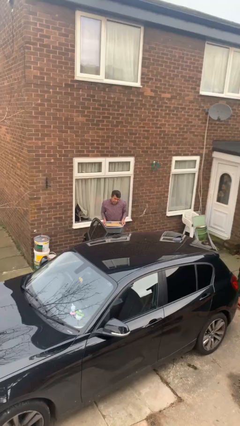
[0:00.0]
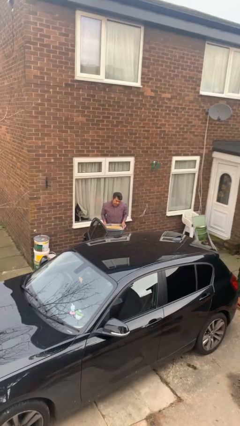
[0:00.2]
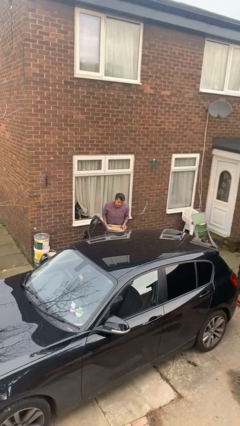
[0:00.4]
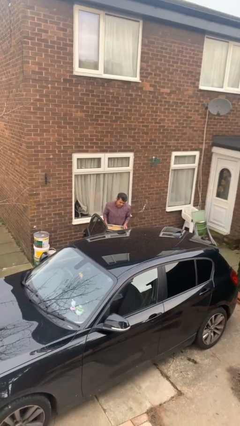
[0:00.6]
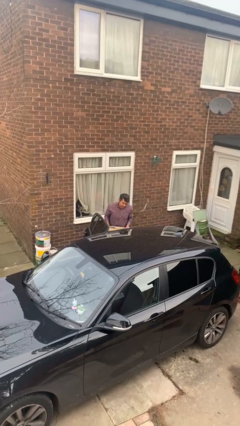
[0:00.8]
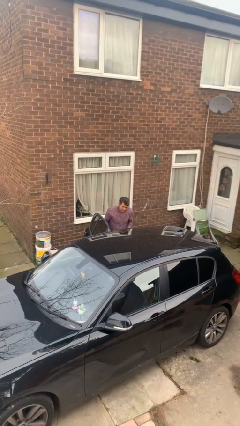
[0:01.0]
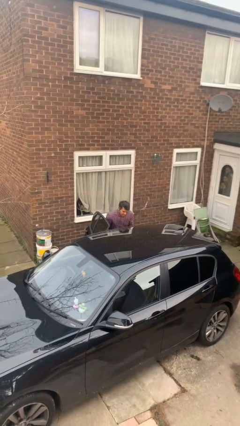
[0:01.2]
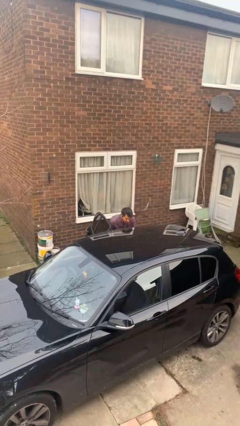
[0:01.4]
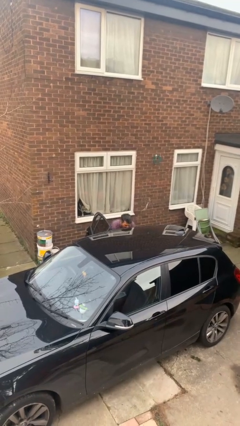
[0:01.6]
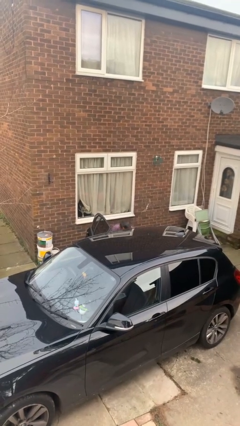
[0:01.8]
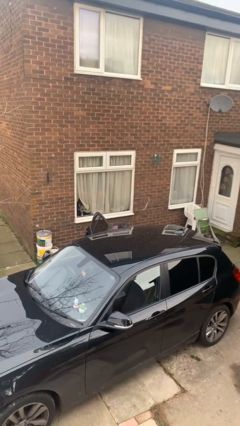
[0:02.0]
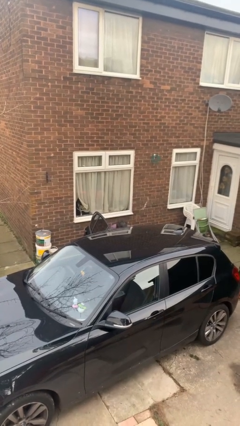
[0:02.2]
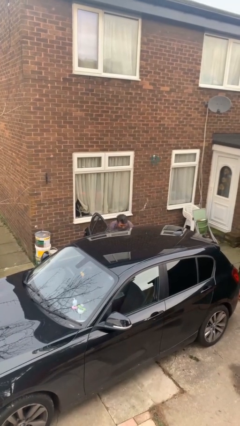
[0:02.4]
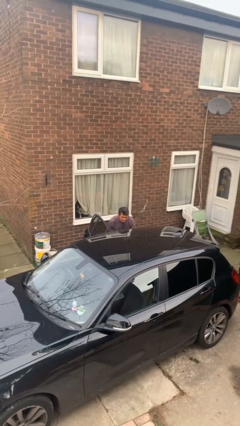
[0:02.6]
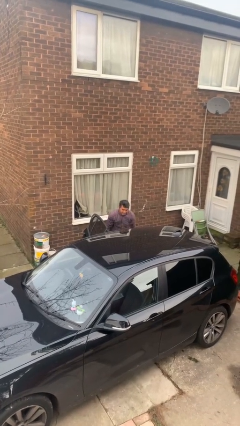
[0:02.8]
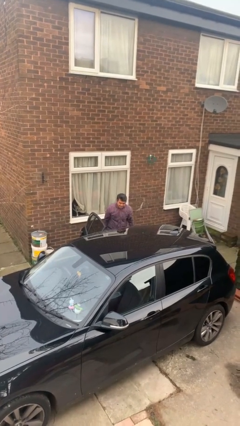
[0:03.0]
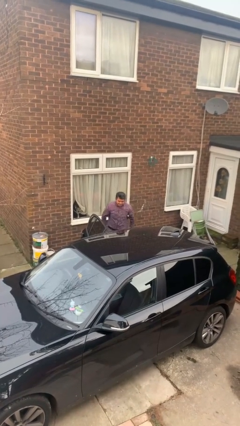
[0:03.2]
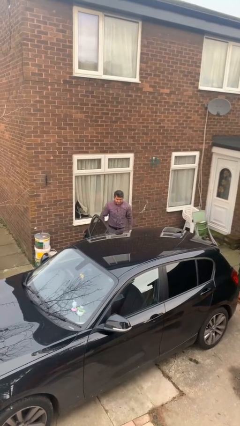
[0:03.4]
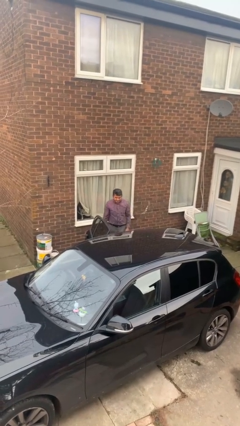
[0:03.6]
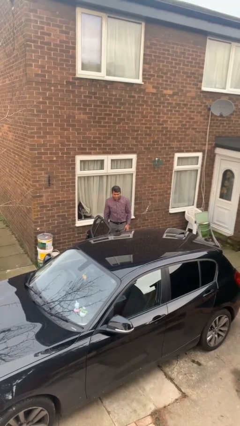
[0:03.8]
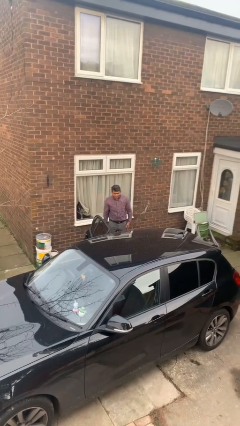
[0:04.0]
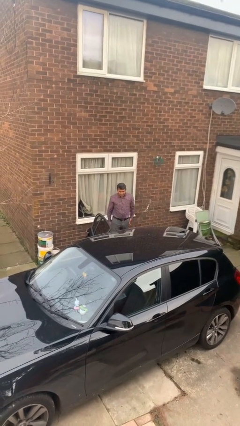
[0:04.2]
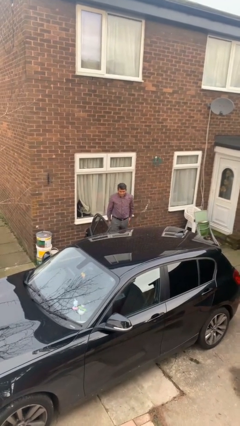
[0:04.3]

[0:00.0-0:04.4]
person loads car

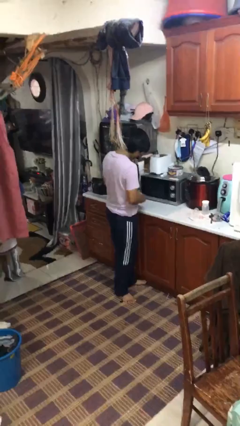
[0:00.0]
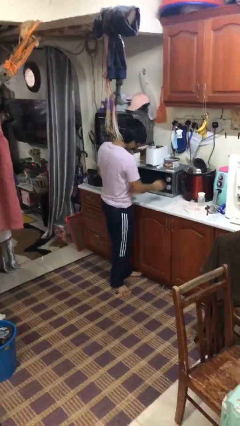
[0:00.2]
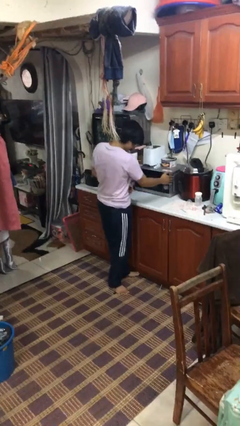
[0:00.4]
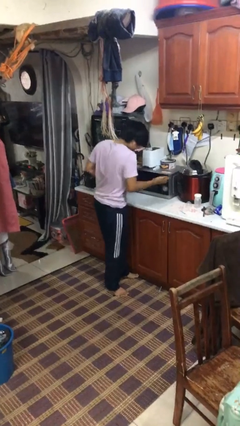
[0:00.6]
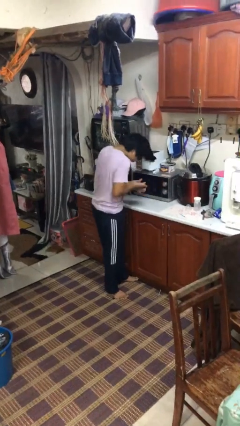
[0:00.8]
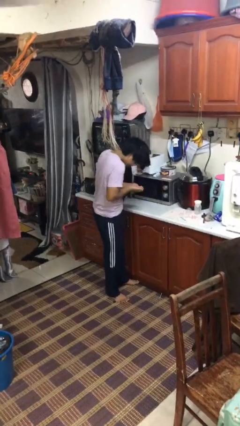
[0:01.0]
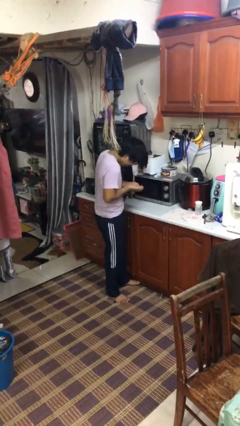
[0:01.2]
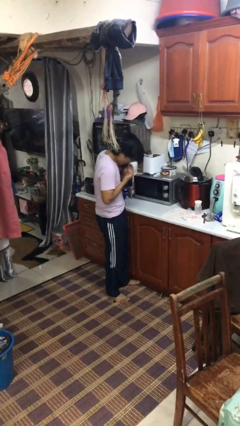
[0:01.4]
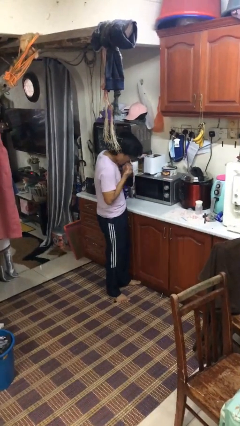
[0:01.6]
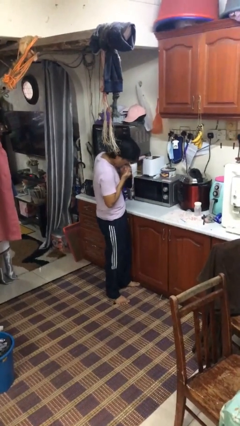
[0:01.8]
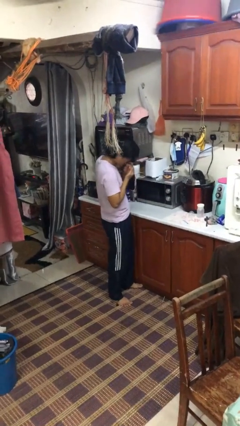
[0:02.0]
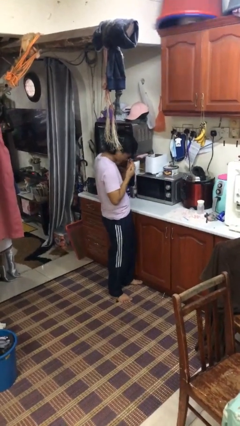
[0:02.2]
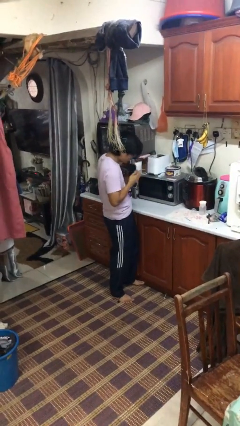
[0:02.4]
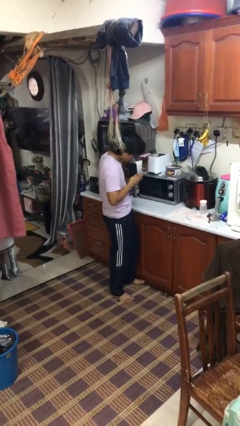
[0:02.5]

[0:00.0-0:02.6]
person burns hand

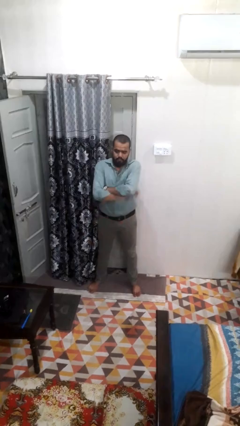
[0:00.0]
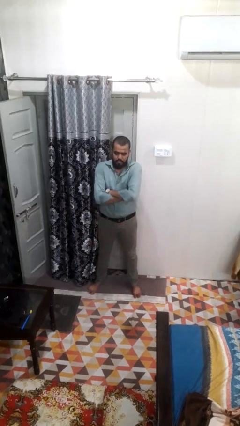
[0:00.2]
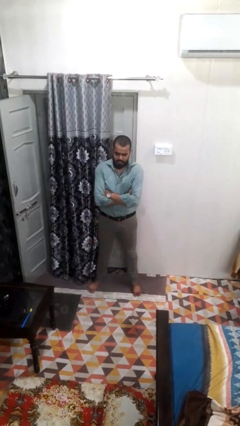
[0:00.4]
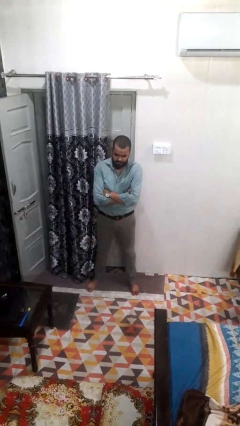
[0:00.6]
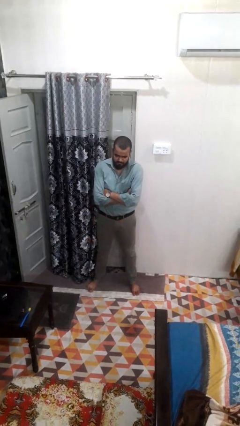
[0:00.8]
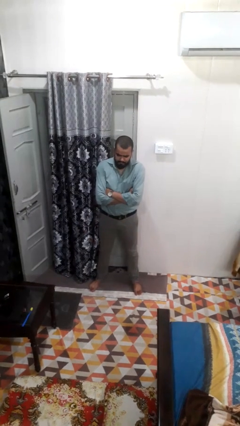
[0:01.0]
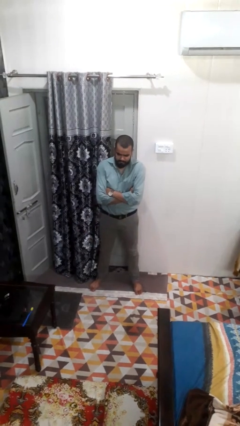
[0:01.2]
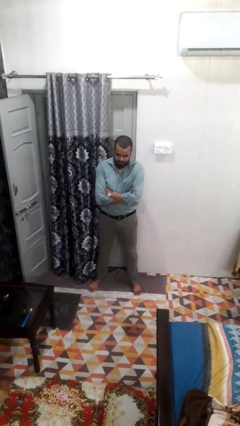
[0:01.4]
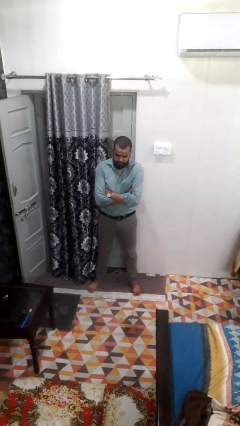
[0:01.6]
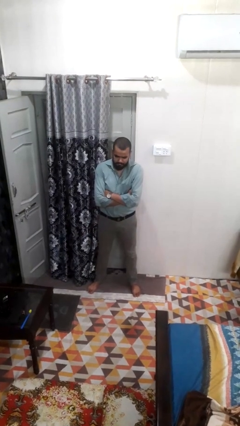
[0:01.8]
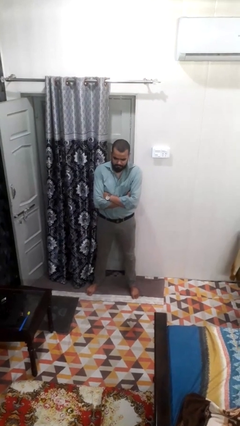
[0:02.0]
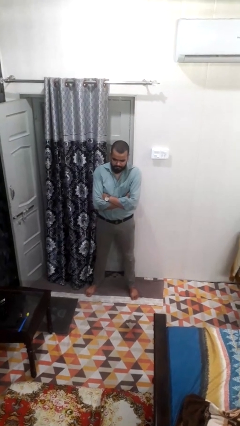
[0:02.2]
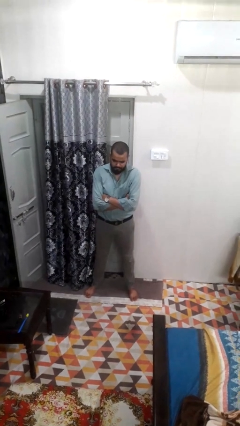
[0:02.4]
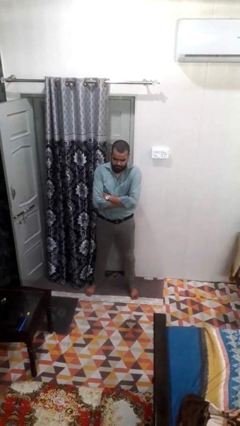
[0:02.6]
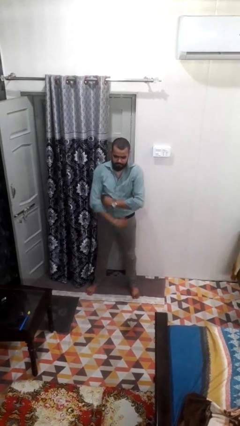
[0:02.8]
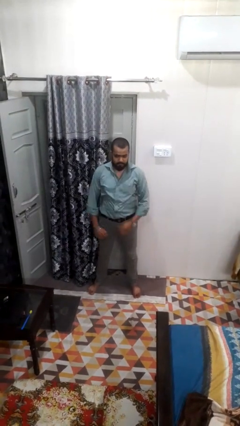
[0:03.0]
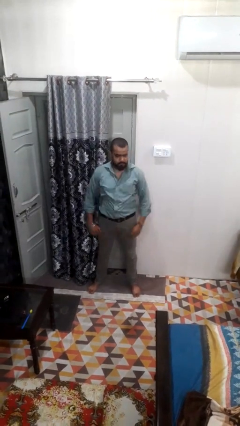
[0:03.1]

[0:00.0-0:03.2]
person crosses arms

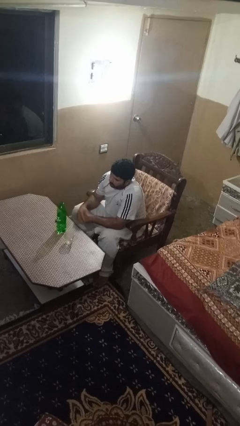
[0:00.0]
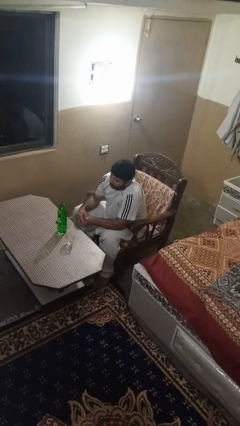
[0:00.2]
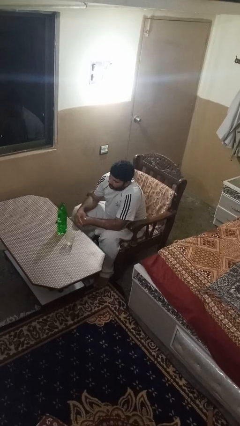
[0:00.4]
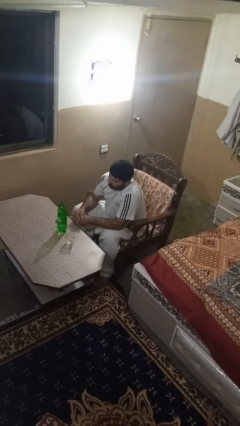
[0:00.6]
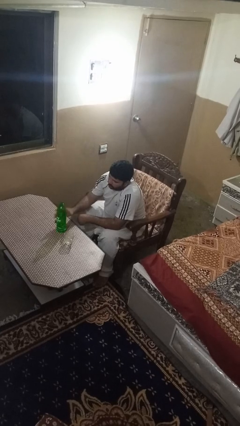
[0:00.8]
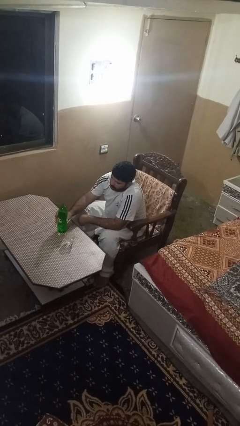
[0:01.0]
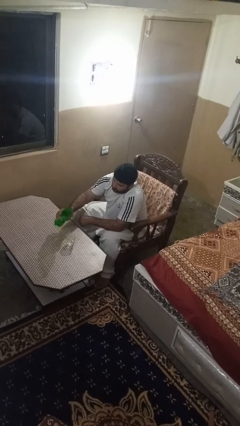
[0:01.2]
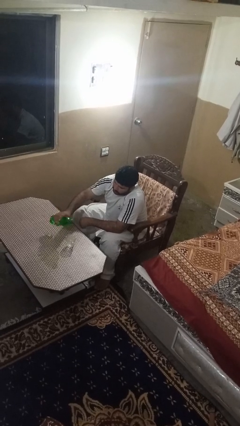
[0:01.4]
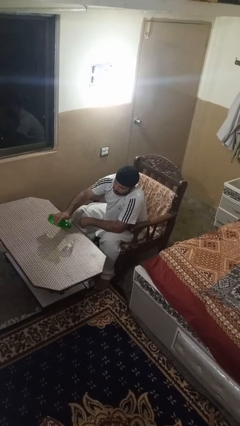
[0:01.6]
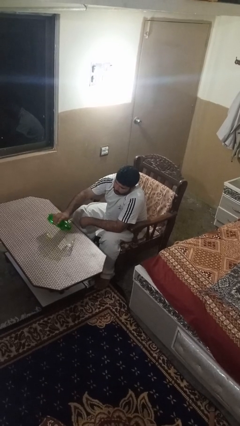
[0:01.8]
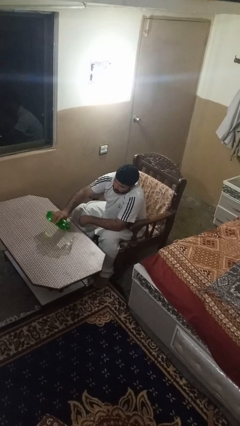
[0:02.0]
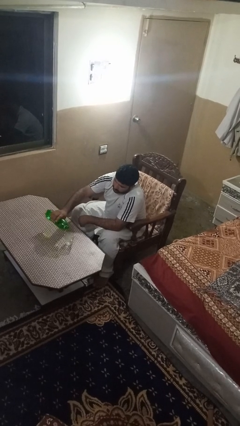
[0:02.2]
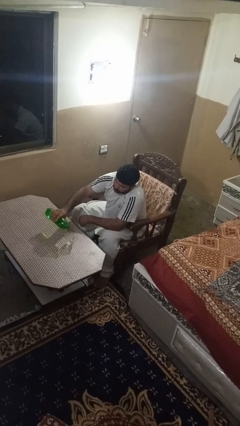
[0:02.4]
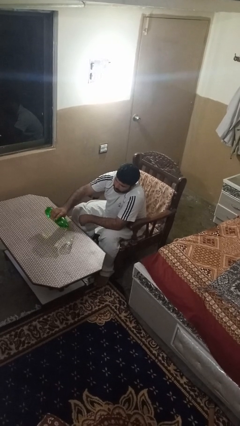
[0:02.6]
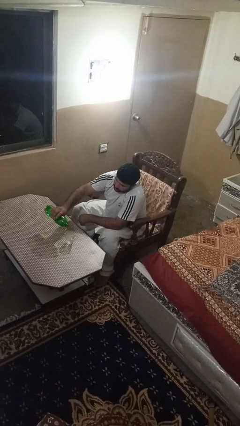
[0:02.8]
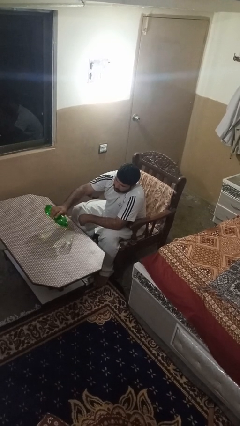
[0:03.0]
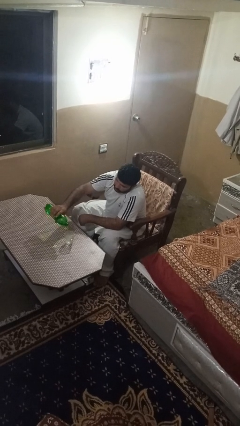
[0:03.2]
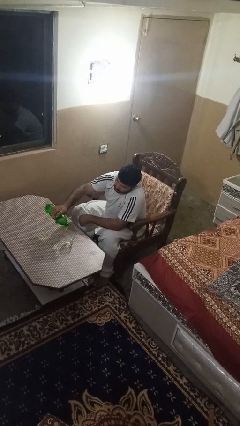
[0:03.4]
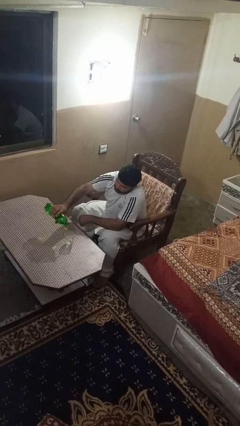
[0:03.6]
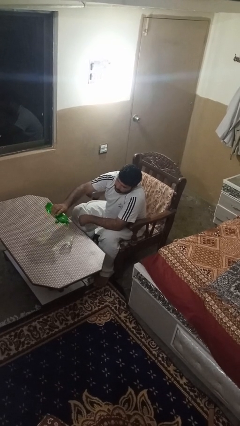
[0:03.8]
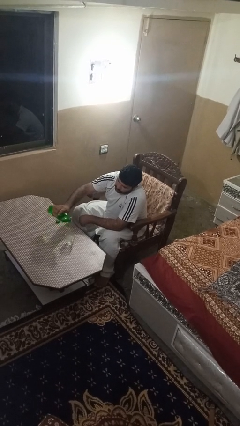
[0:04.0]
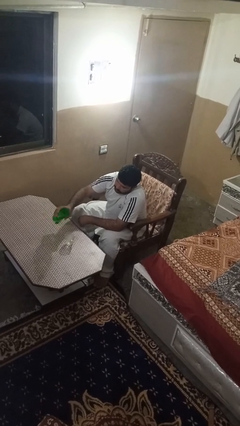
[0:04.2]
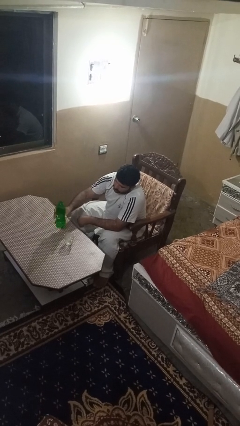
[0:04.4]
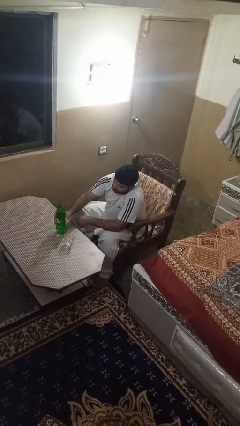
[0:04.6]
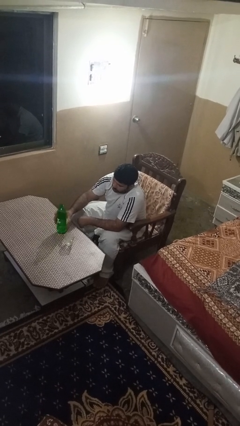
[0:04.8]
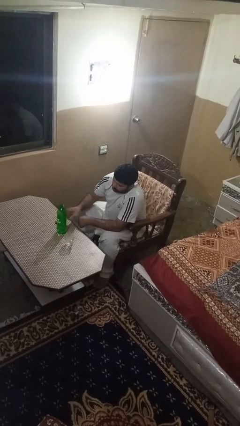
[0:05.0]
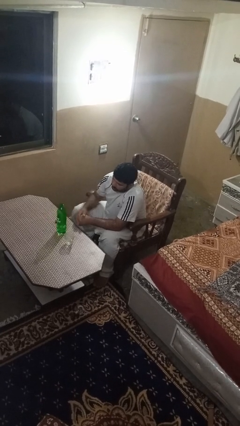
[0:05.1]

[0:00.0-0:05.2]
person pours liquid into cup

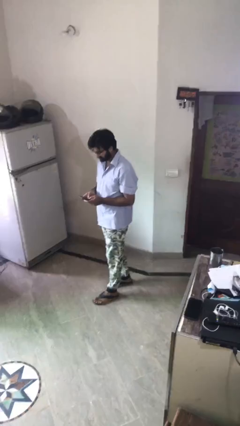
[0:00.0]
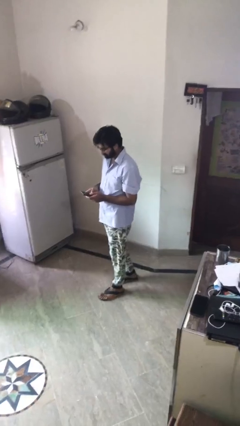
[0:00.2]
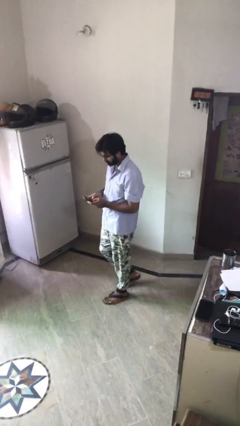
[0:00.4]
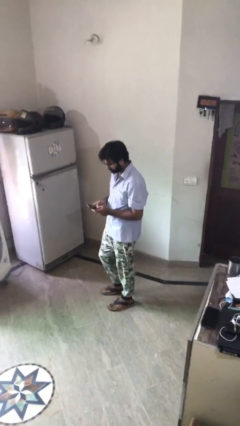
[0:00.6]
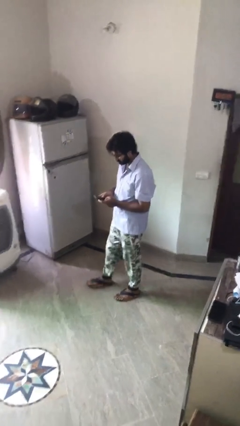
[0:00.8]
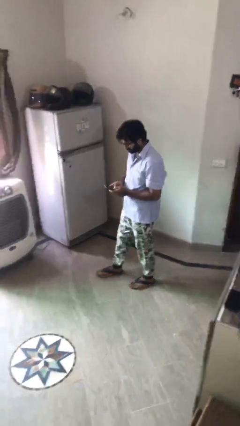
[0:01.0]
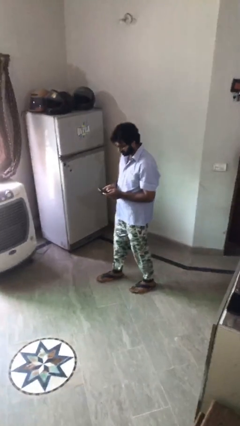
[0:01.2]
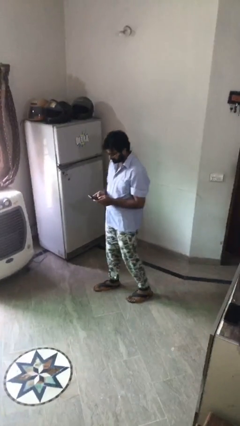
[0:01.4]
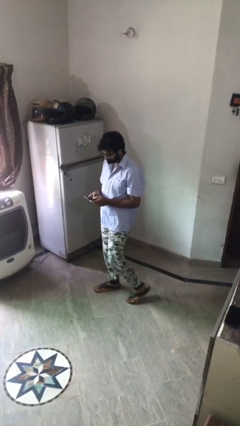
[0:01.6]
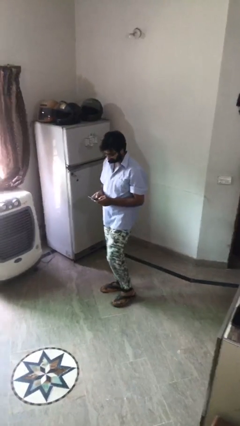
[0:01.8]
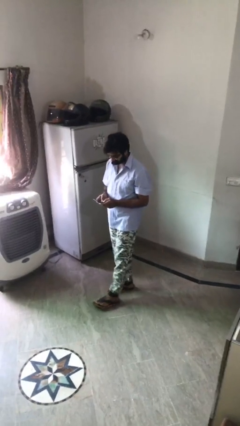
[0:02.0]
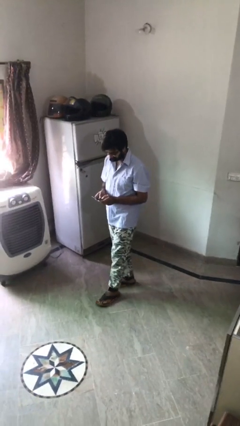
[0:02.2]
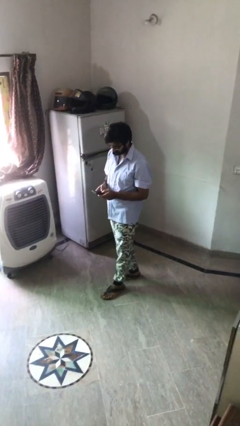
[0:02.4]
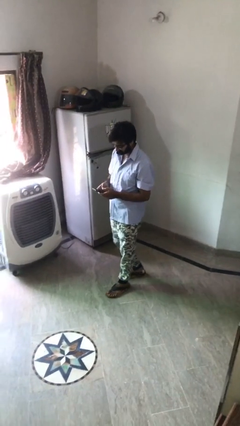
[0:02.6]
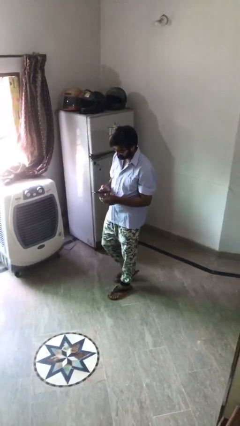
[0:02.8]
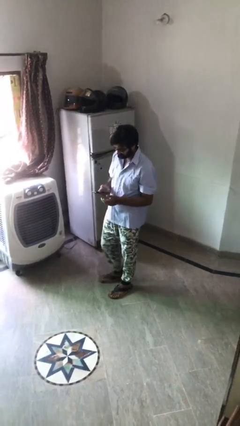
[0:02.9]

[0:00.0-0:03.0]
person texts on phone
